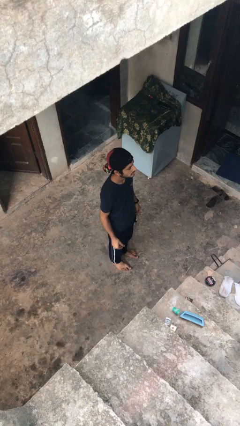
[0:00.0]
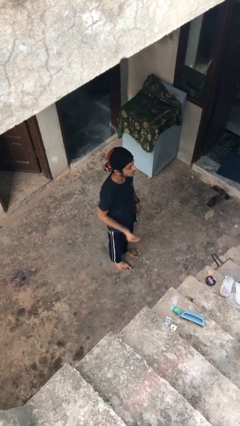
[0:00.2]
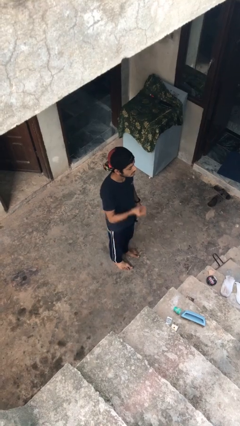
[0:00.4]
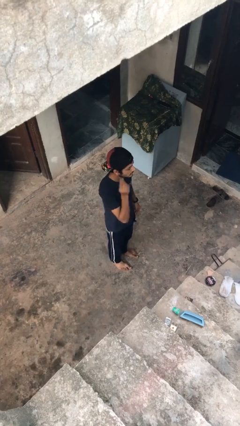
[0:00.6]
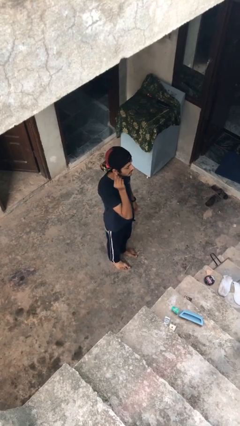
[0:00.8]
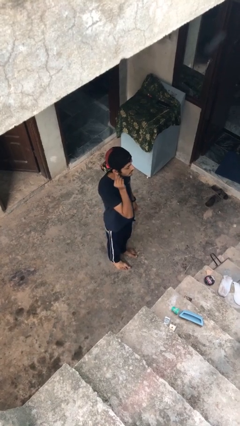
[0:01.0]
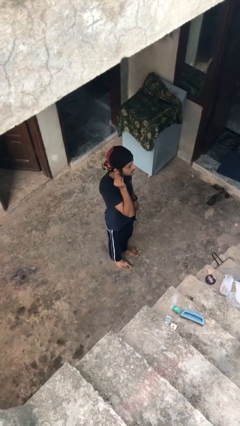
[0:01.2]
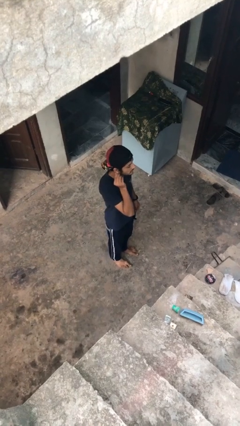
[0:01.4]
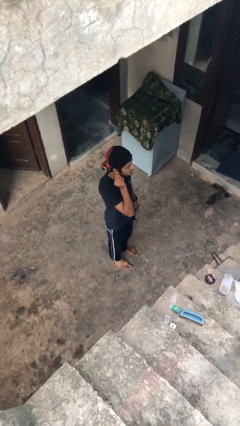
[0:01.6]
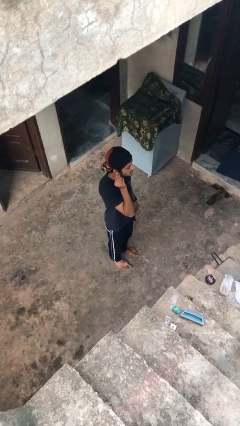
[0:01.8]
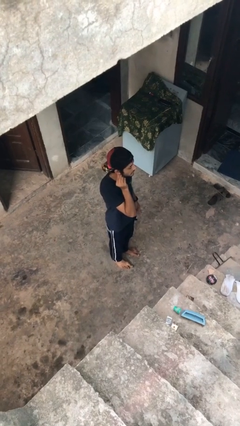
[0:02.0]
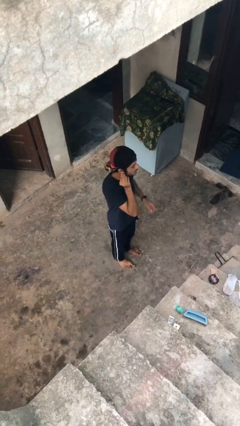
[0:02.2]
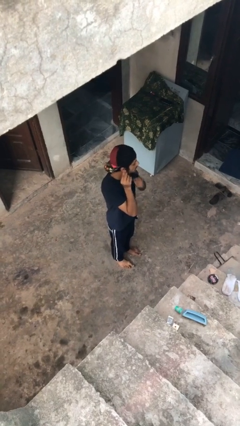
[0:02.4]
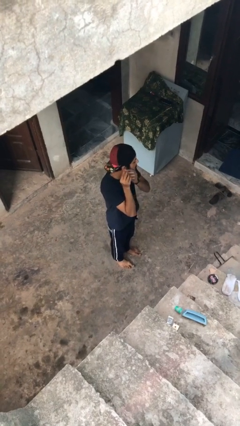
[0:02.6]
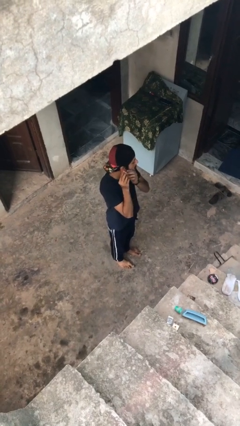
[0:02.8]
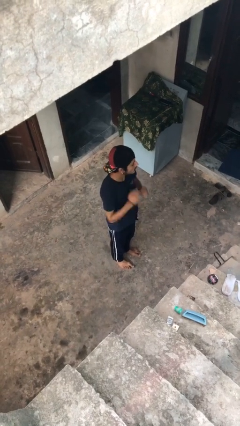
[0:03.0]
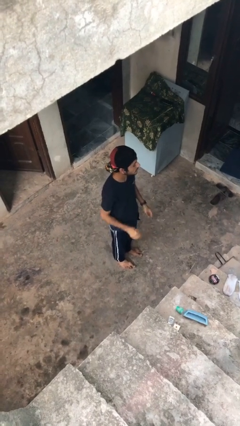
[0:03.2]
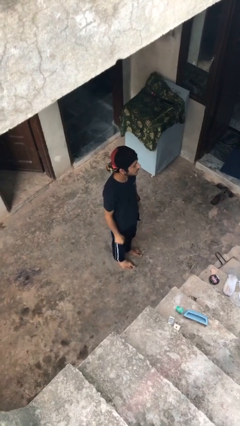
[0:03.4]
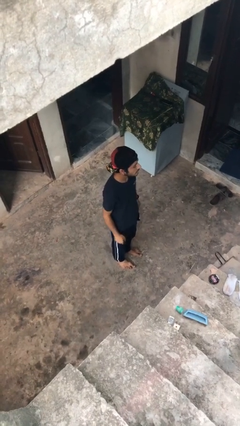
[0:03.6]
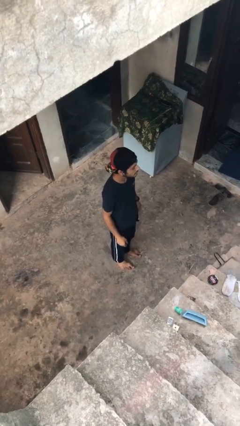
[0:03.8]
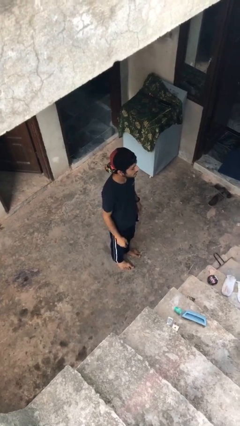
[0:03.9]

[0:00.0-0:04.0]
person puts on earrings

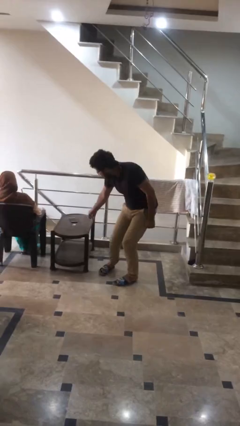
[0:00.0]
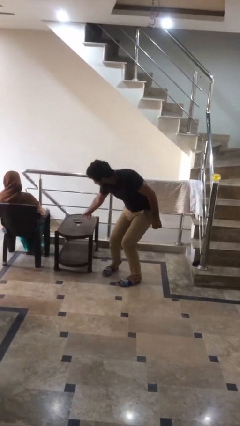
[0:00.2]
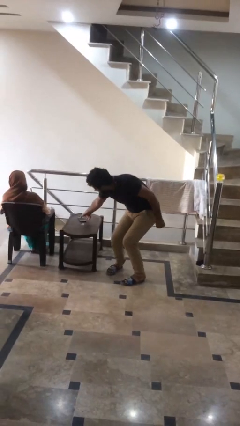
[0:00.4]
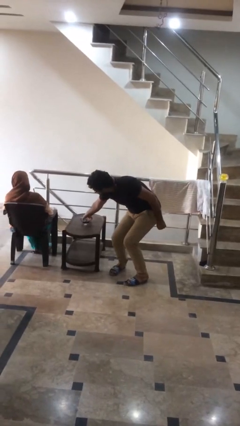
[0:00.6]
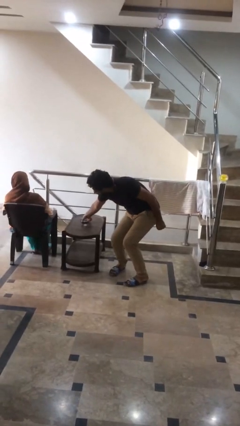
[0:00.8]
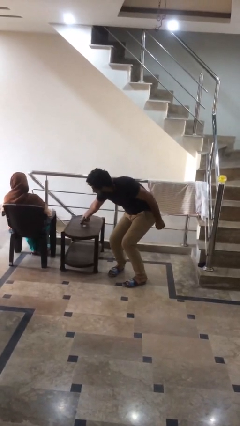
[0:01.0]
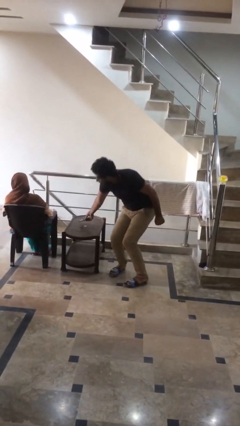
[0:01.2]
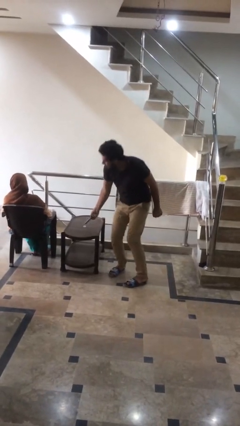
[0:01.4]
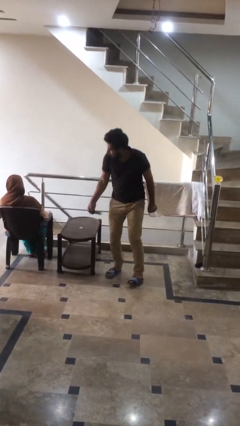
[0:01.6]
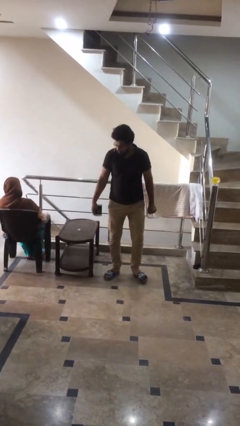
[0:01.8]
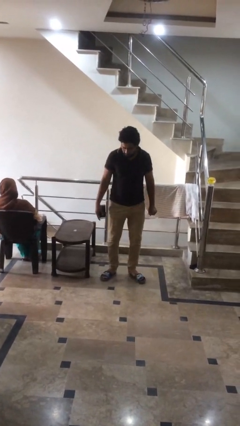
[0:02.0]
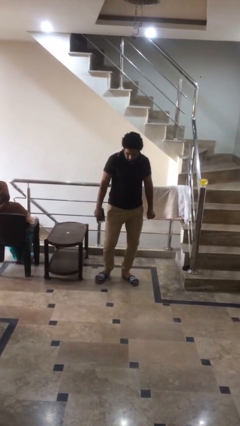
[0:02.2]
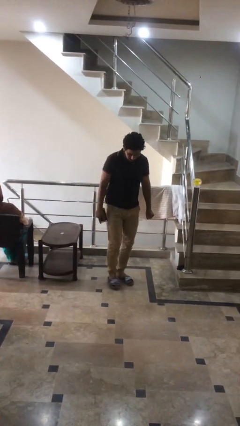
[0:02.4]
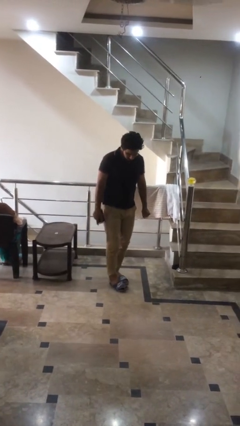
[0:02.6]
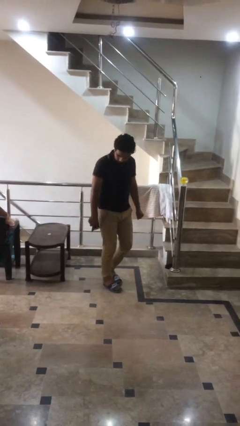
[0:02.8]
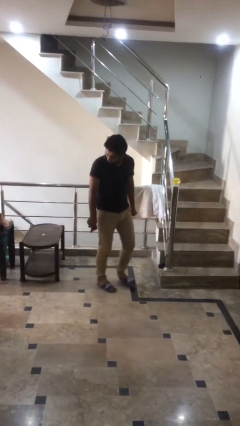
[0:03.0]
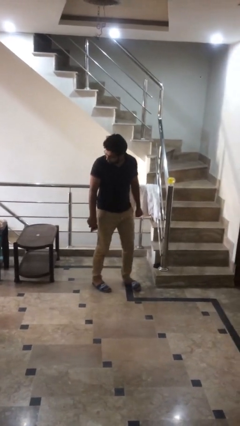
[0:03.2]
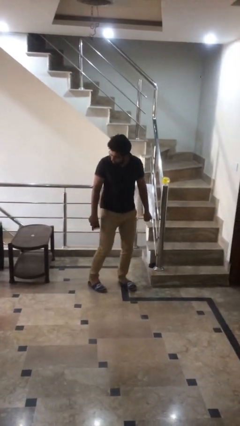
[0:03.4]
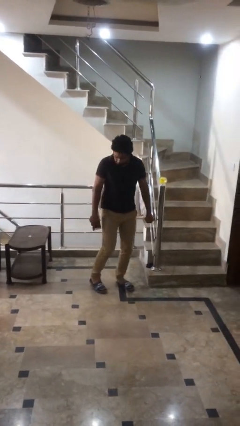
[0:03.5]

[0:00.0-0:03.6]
person steals object from person

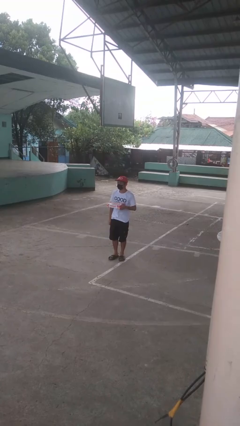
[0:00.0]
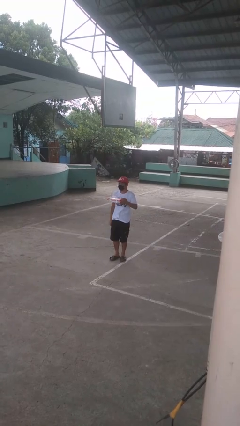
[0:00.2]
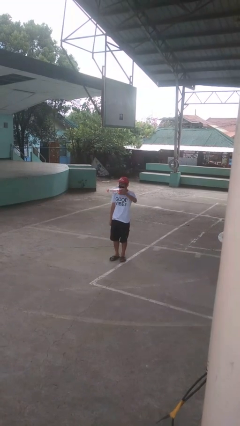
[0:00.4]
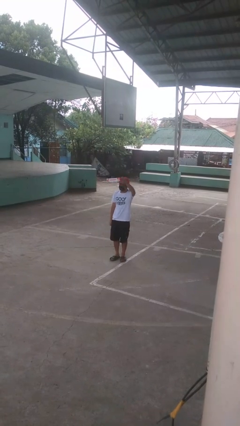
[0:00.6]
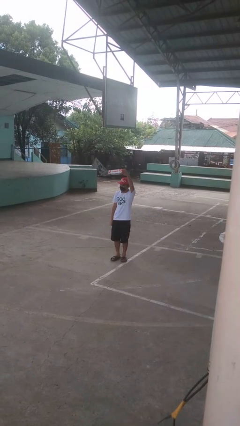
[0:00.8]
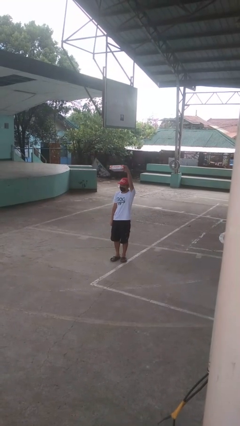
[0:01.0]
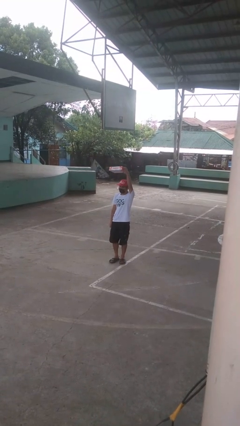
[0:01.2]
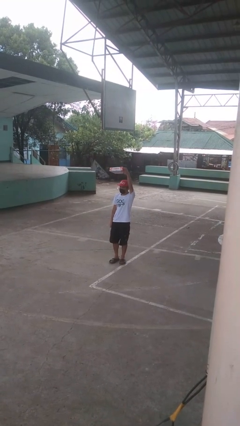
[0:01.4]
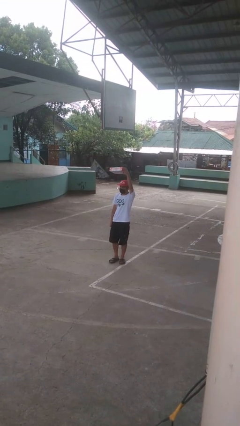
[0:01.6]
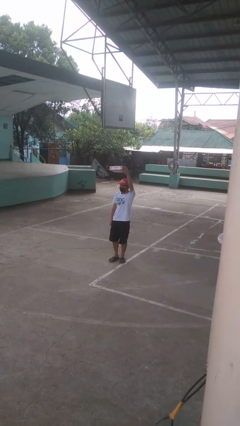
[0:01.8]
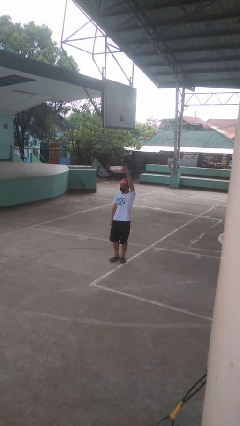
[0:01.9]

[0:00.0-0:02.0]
person holds object above head

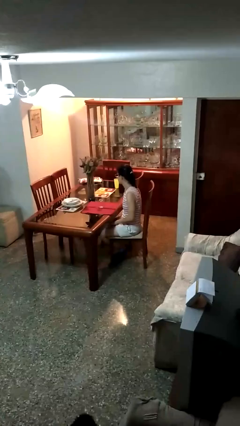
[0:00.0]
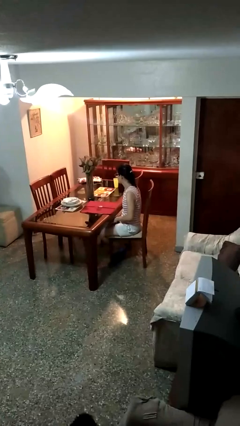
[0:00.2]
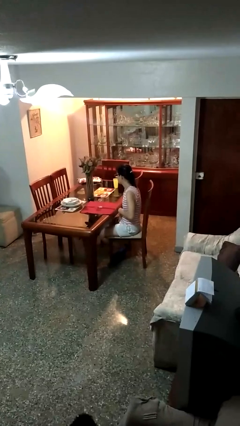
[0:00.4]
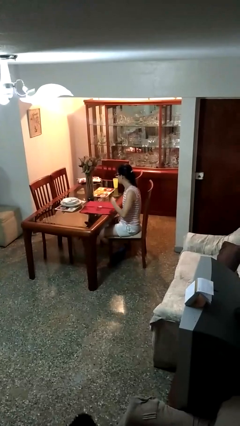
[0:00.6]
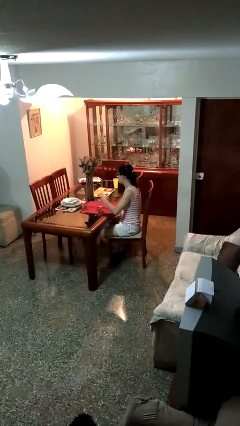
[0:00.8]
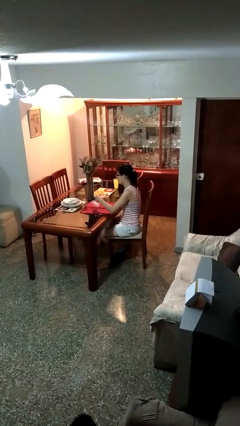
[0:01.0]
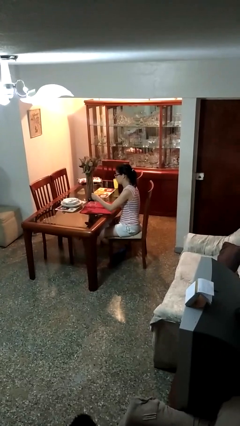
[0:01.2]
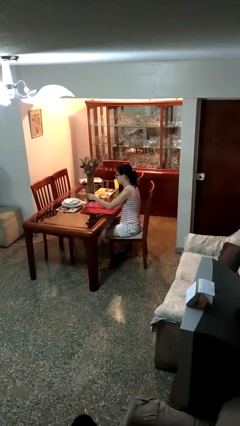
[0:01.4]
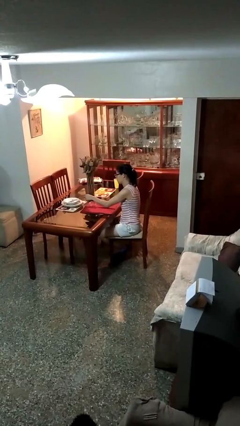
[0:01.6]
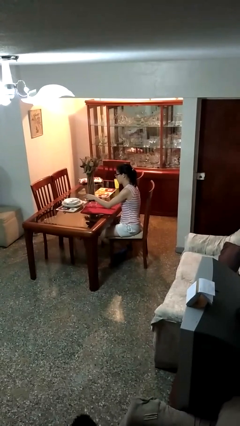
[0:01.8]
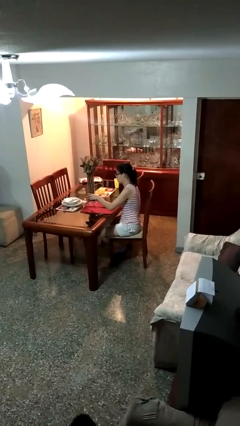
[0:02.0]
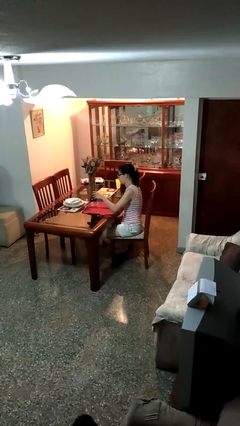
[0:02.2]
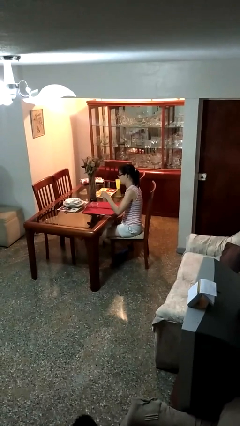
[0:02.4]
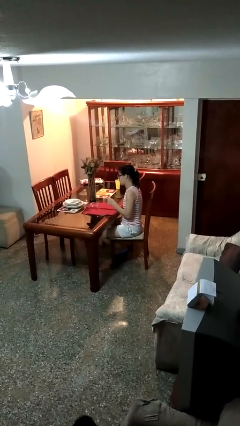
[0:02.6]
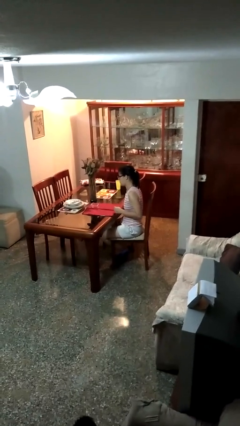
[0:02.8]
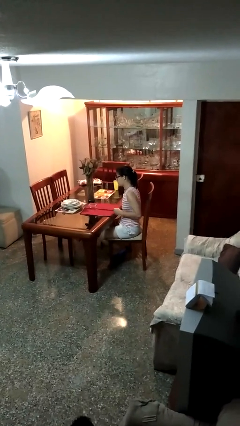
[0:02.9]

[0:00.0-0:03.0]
person knocks over glass

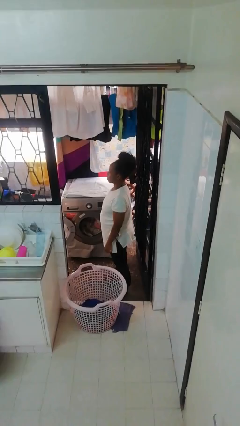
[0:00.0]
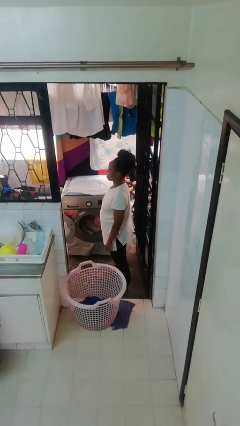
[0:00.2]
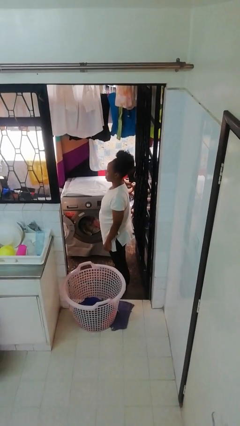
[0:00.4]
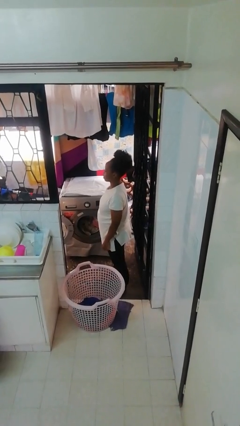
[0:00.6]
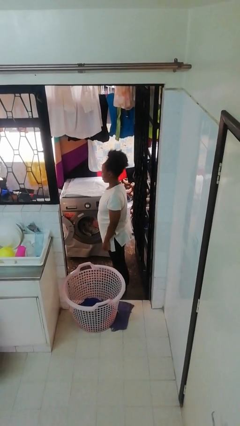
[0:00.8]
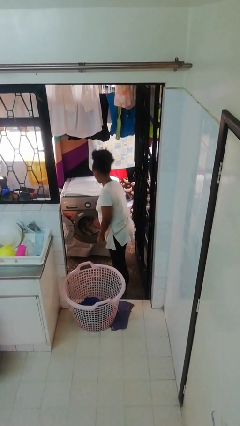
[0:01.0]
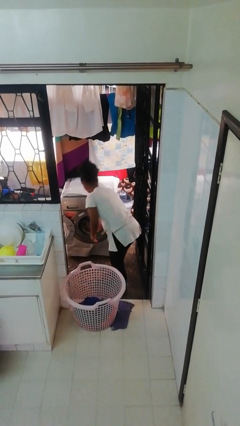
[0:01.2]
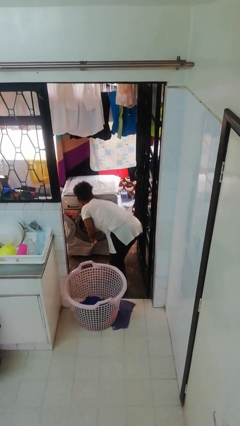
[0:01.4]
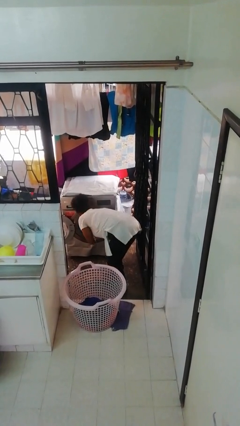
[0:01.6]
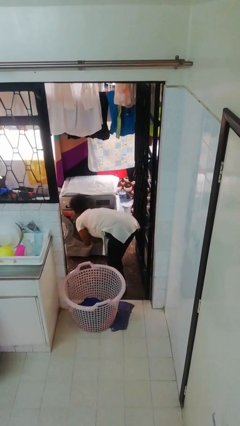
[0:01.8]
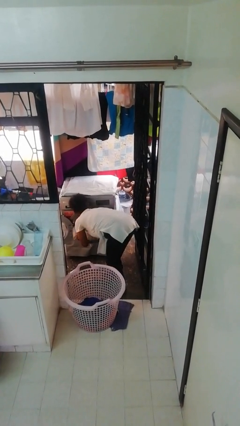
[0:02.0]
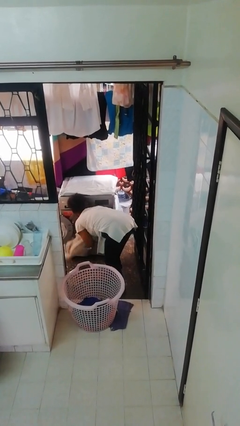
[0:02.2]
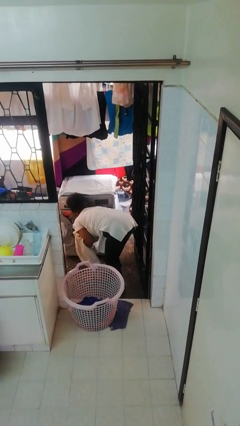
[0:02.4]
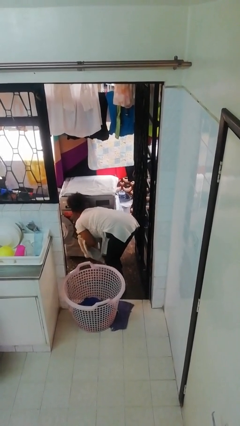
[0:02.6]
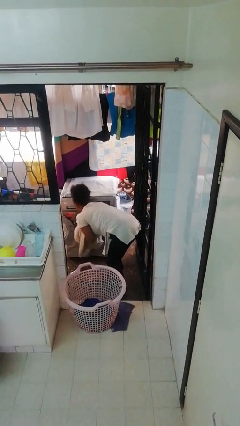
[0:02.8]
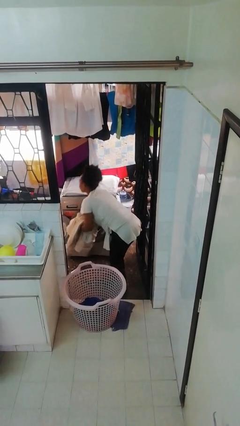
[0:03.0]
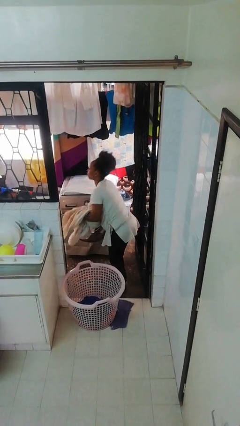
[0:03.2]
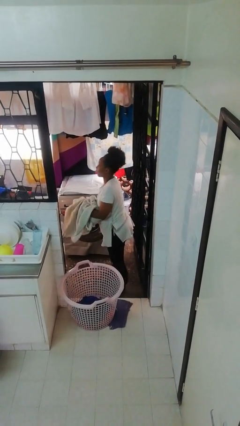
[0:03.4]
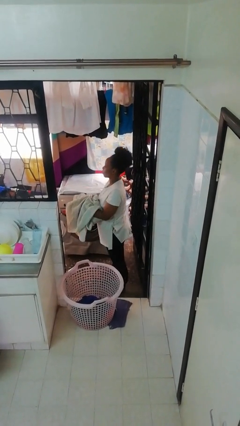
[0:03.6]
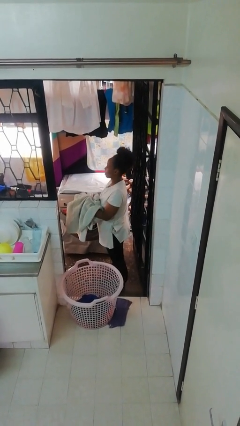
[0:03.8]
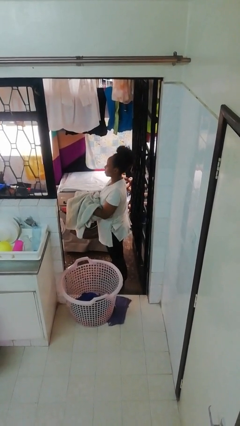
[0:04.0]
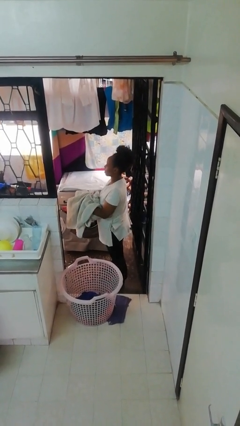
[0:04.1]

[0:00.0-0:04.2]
person unloads dryer

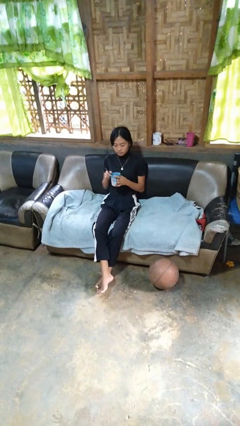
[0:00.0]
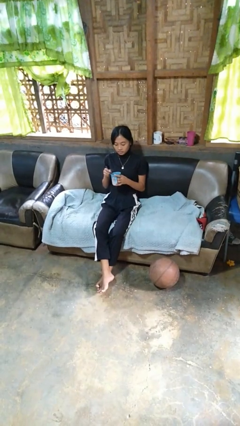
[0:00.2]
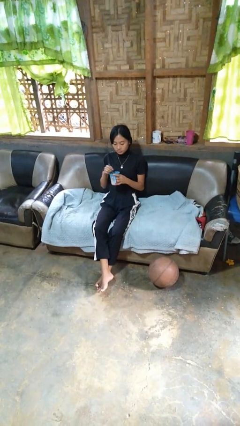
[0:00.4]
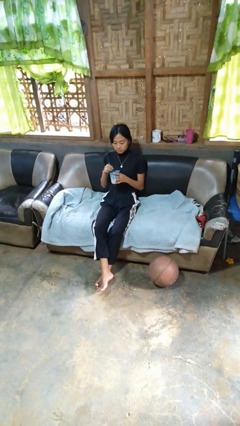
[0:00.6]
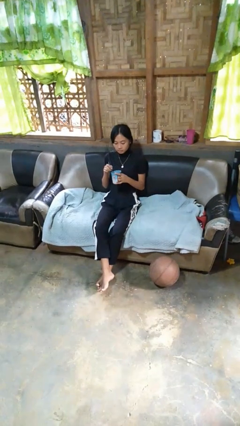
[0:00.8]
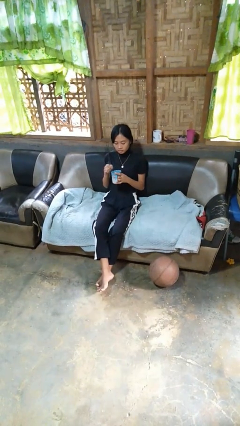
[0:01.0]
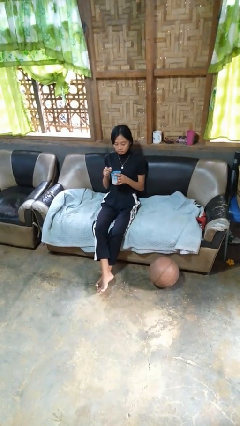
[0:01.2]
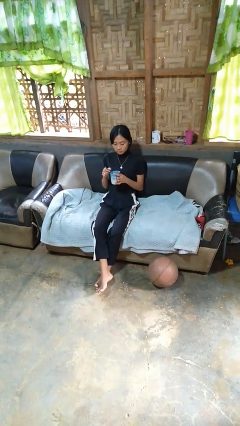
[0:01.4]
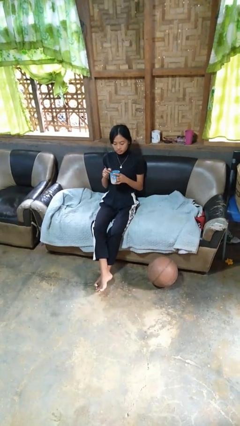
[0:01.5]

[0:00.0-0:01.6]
person stirs mug
